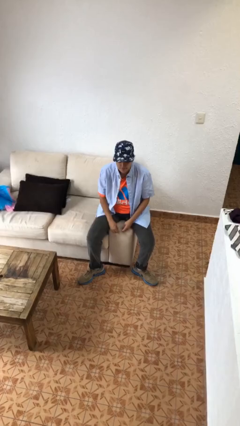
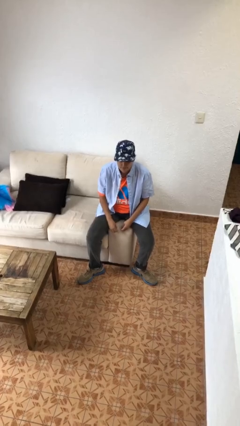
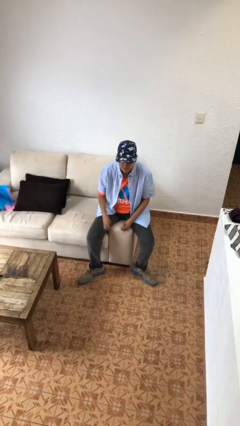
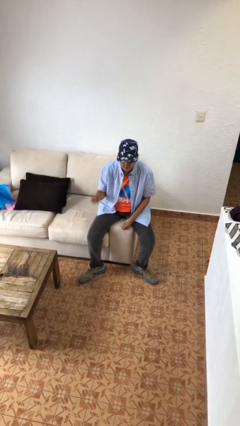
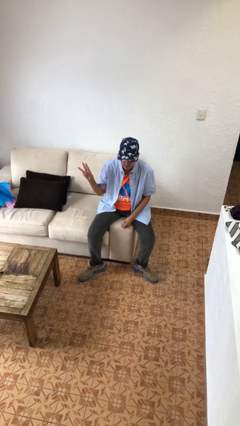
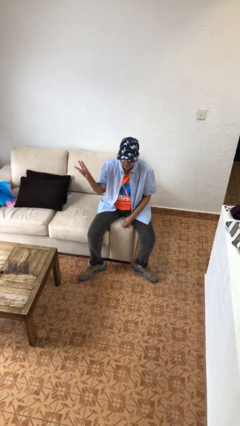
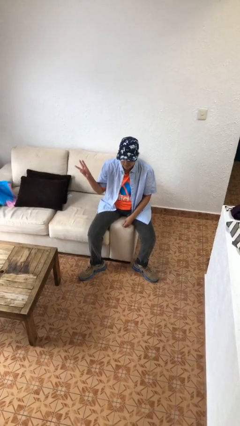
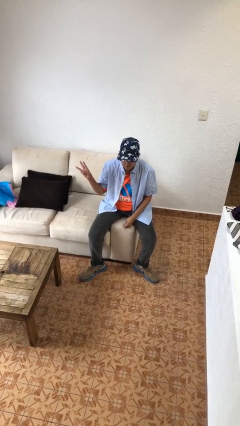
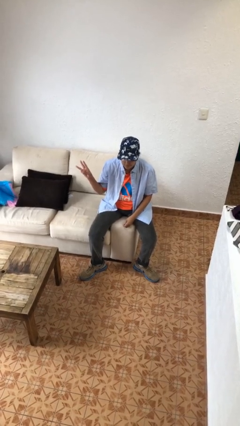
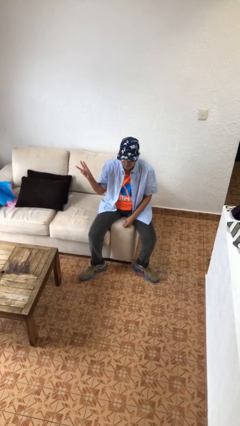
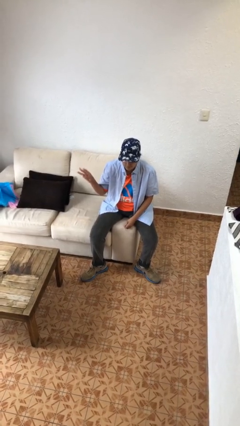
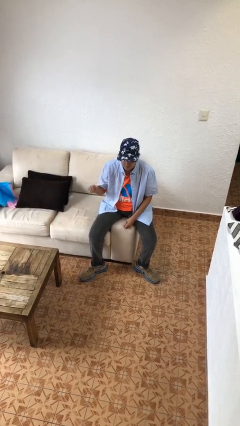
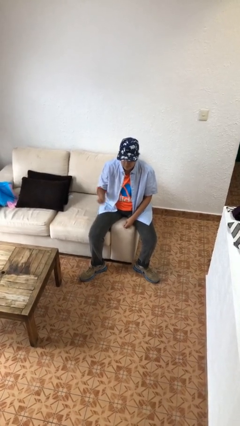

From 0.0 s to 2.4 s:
person gestures number three

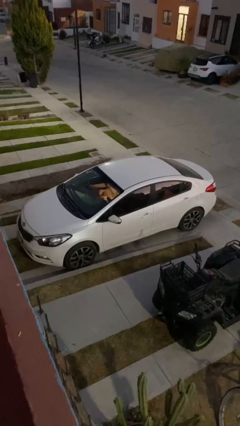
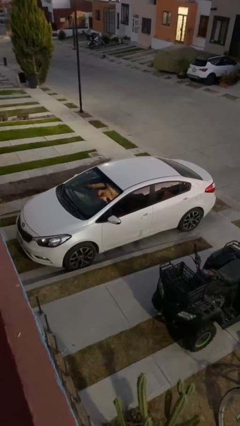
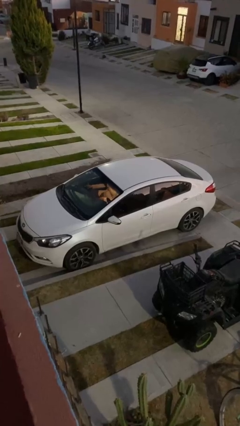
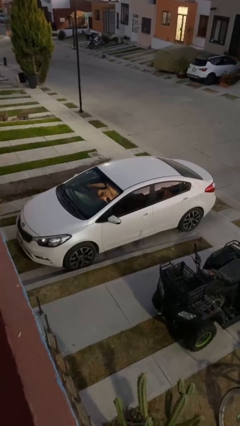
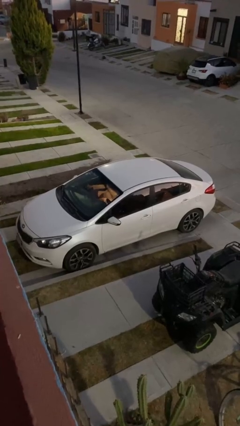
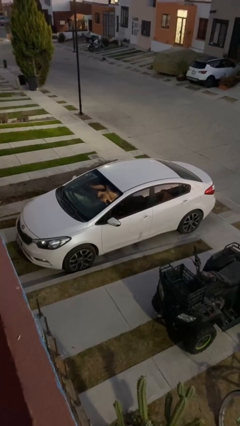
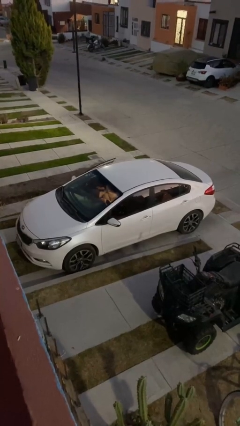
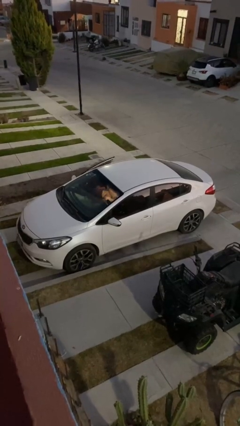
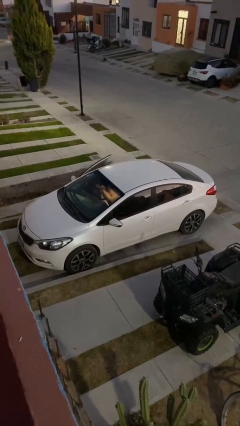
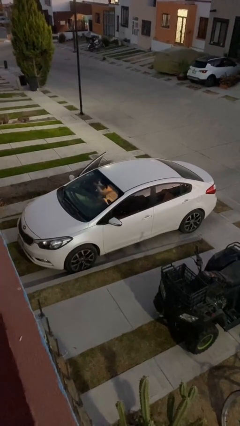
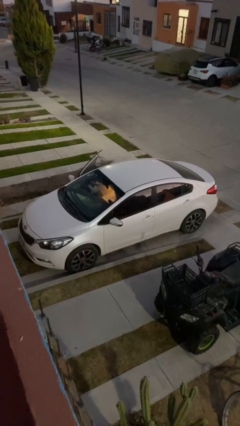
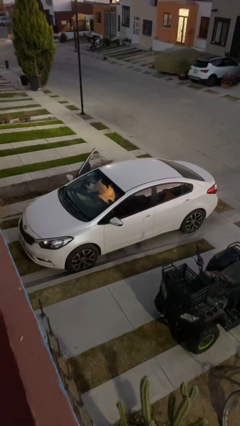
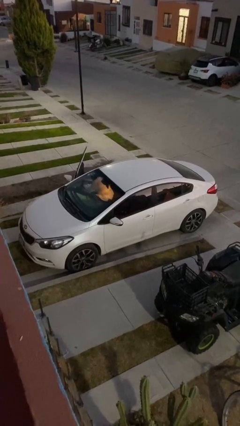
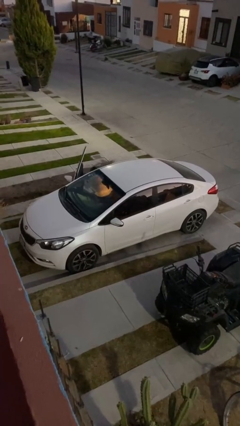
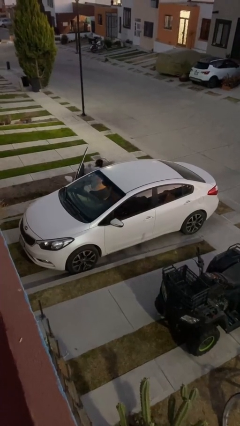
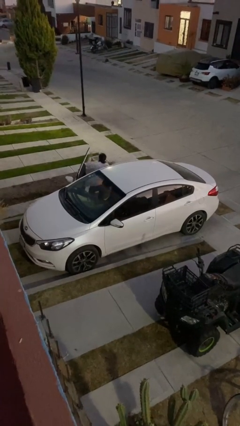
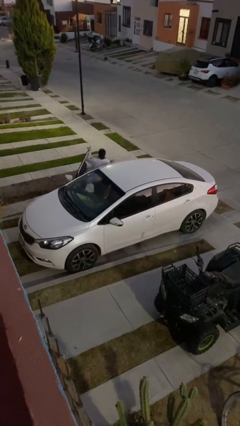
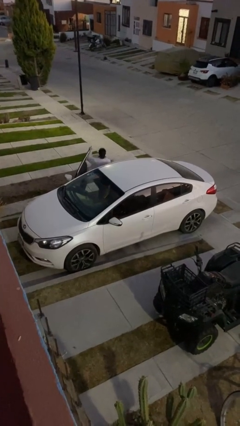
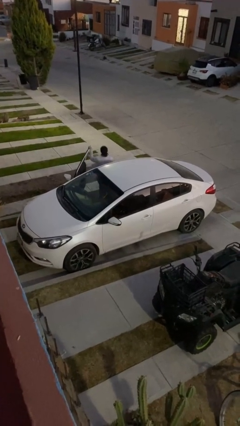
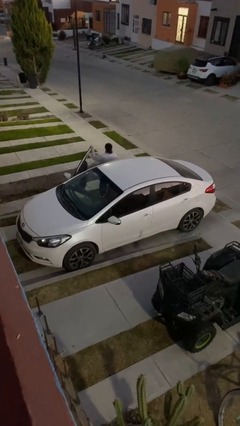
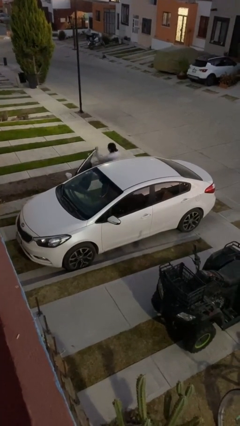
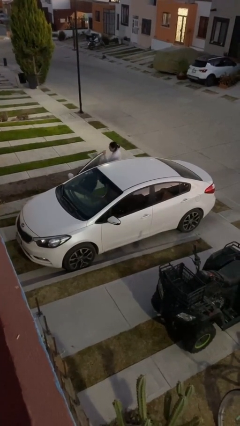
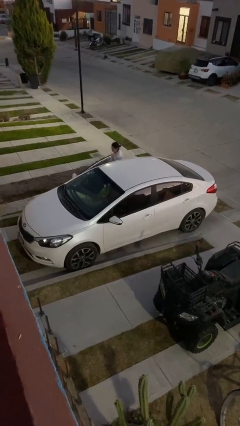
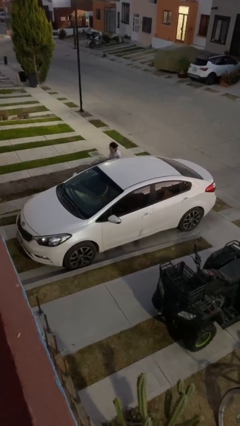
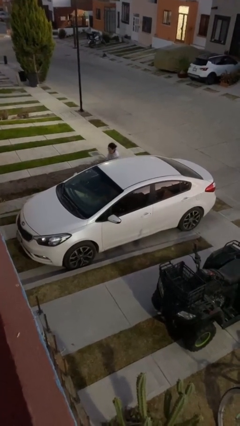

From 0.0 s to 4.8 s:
car drops off person

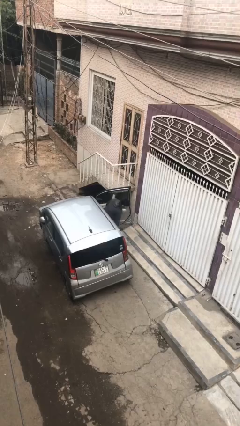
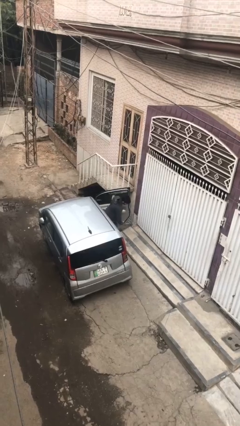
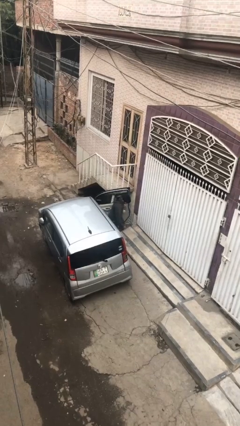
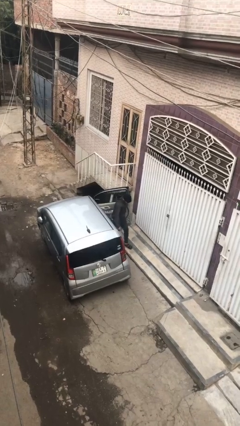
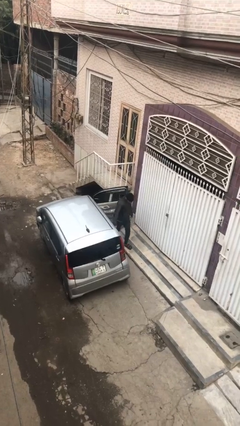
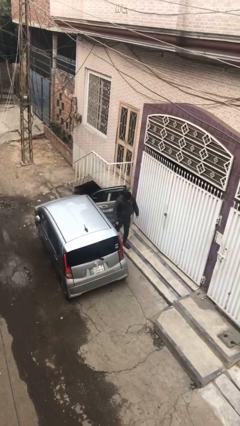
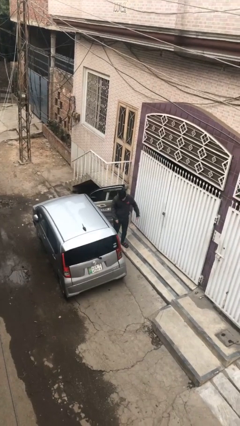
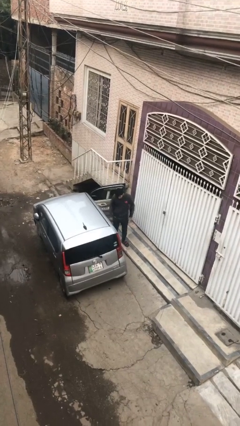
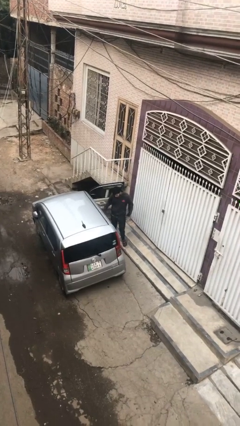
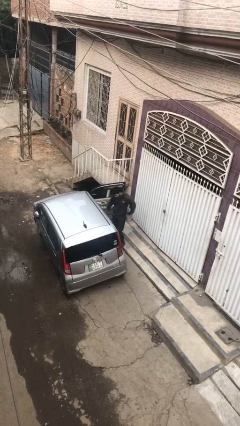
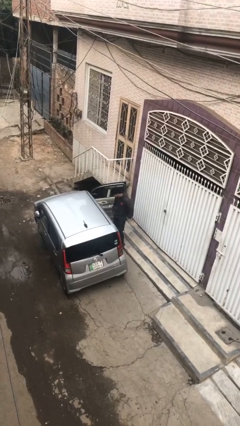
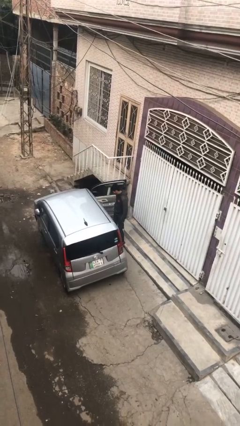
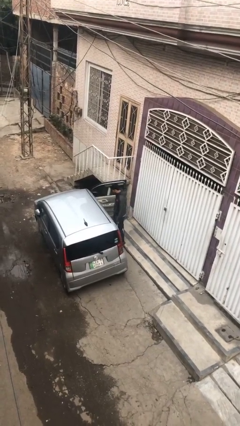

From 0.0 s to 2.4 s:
person exits car

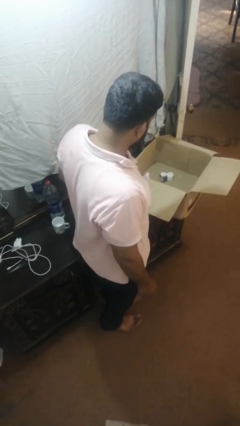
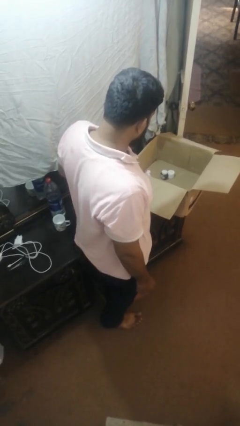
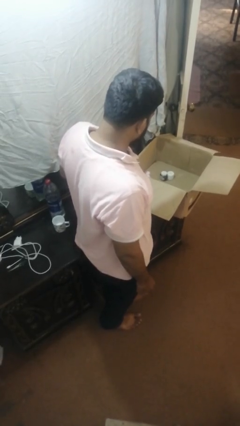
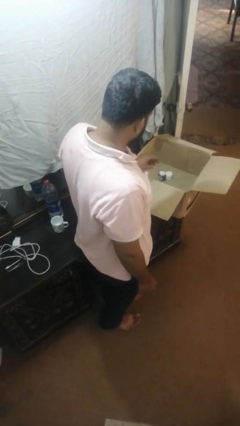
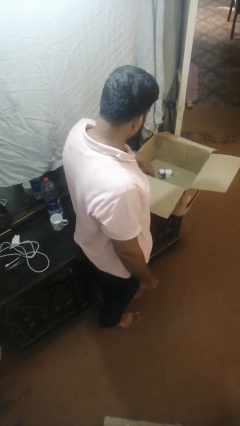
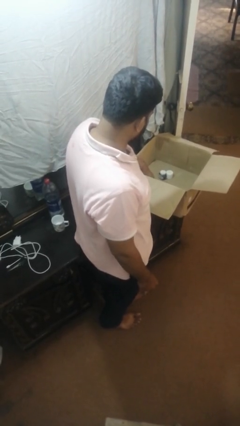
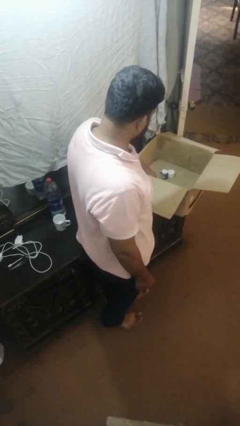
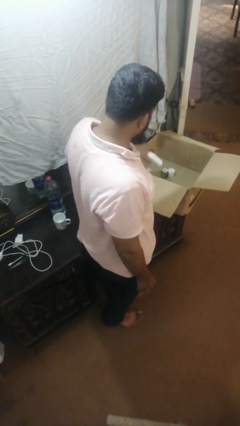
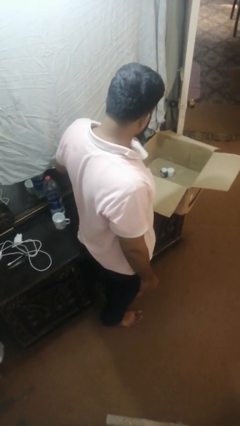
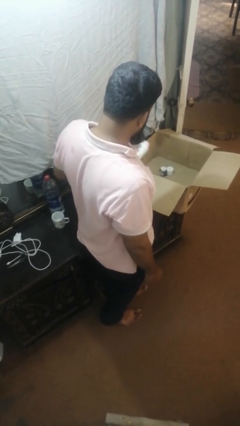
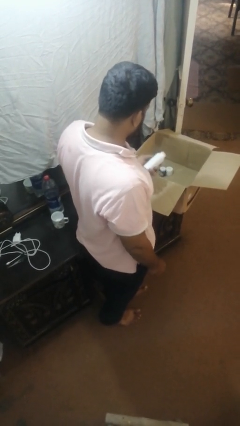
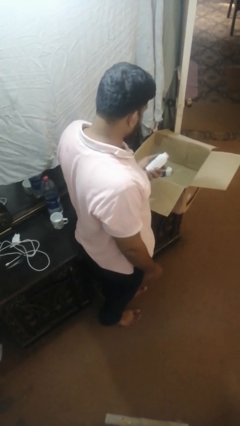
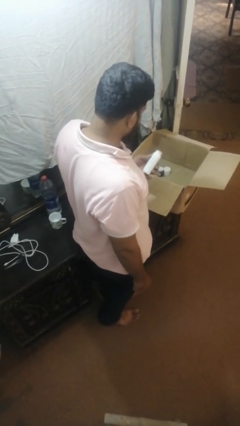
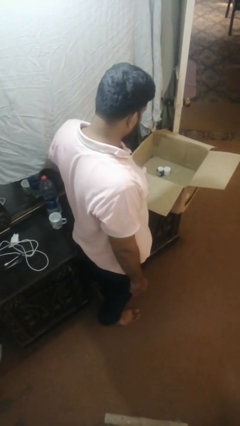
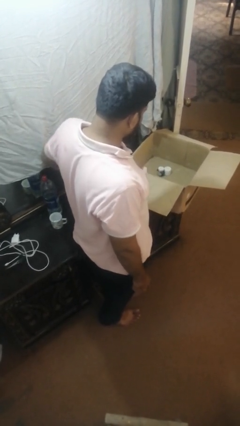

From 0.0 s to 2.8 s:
person takes object from box

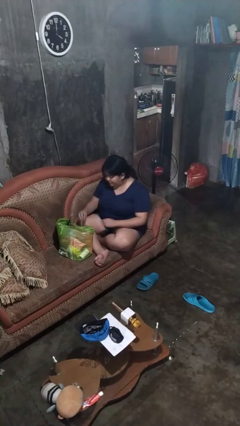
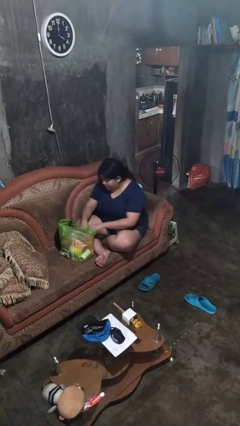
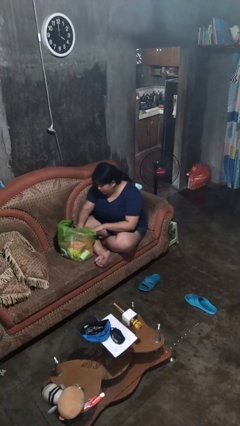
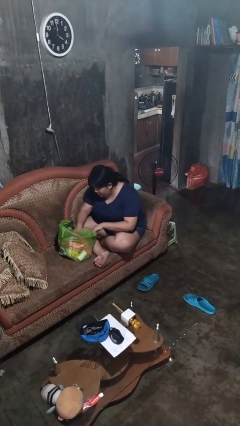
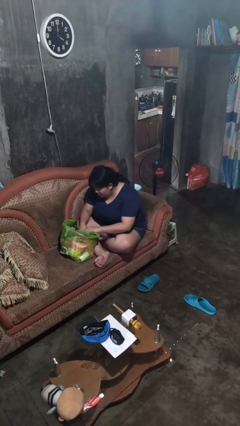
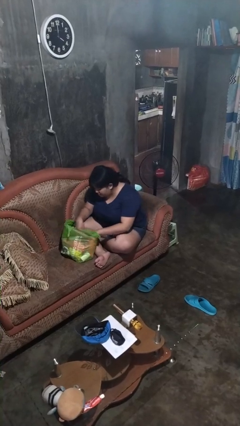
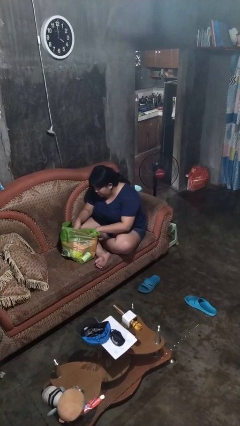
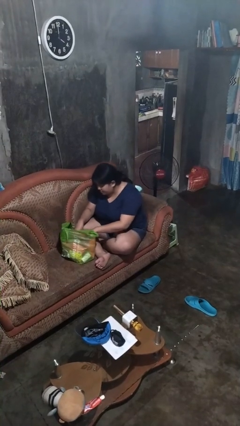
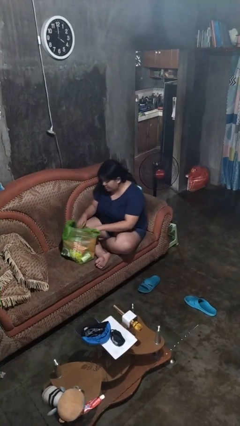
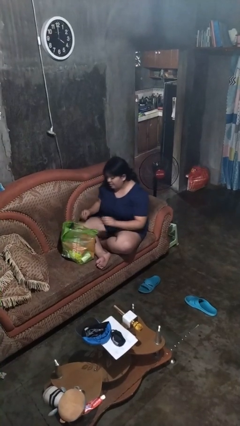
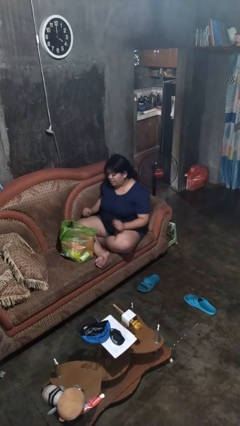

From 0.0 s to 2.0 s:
person searches in bag

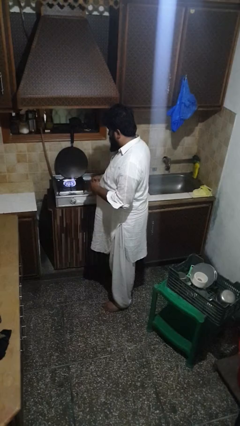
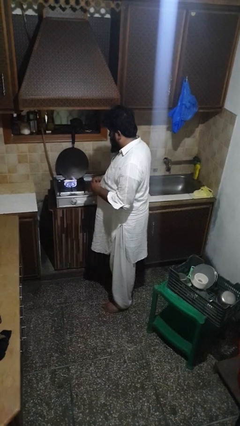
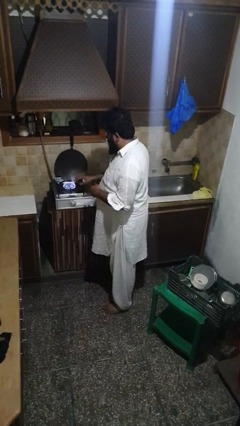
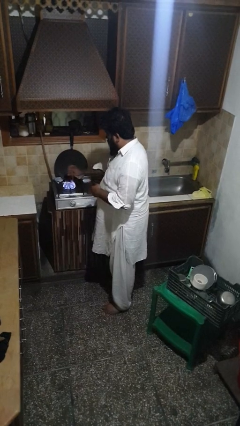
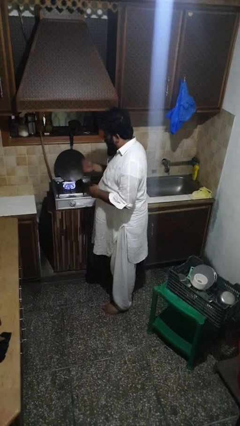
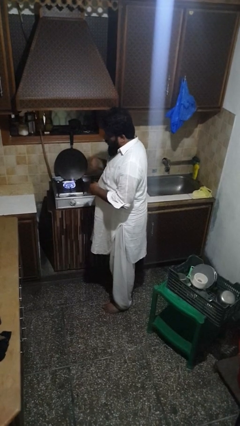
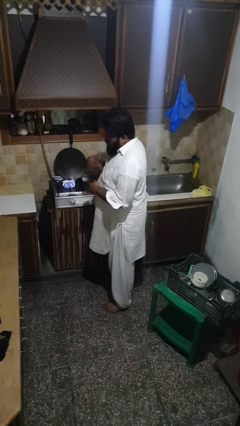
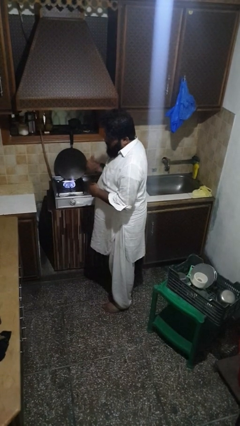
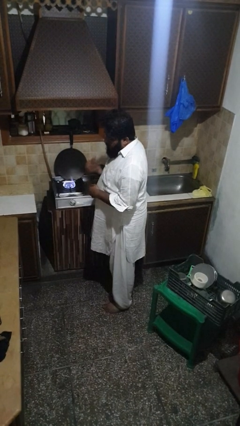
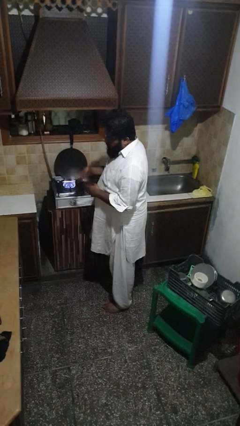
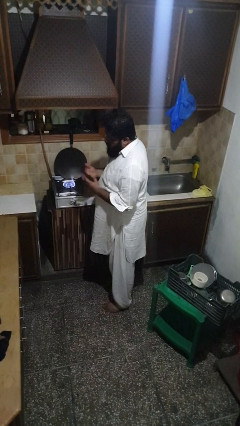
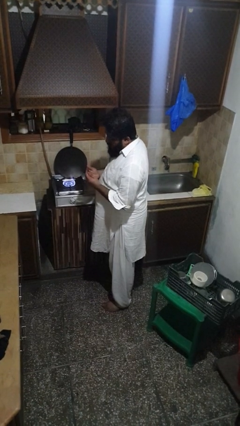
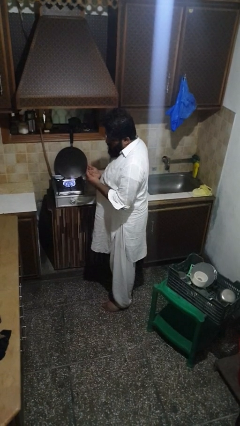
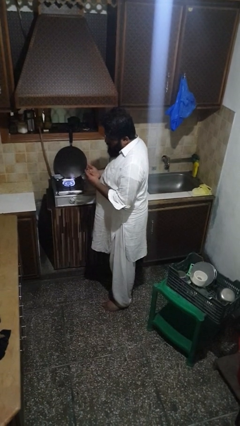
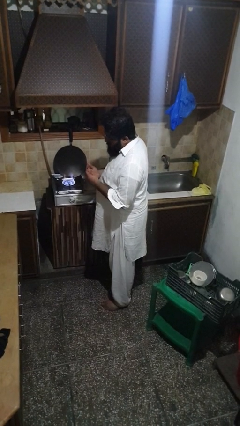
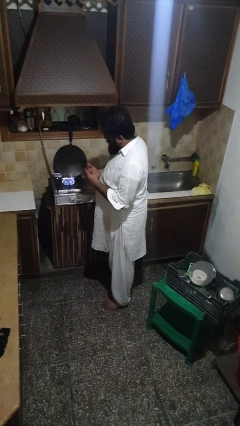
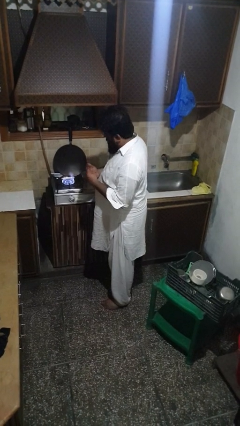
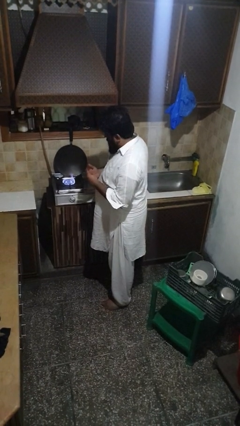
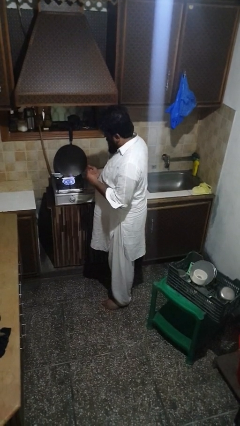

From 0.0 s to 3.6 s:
person burns hand
